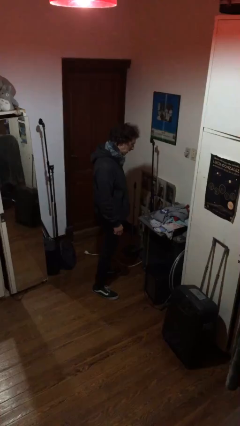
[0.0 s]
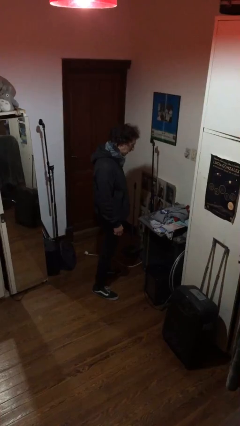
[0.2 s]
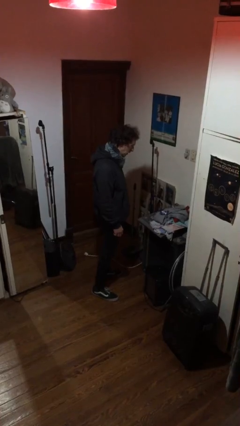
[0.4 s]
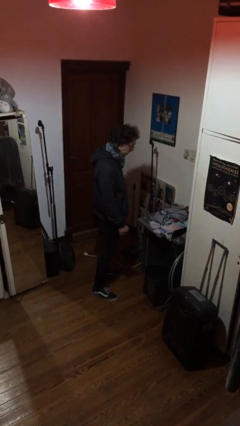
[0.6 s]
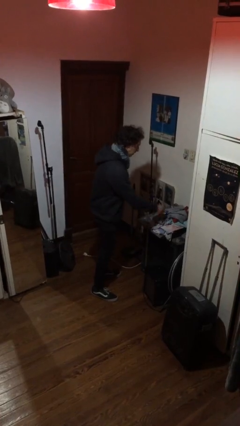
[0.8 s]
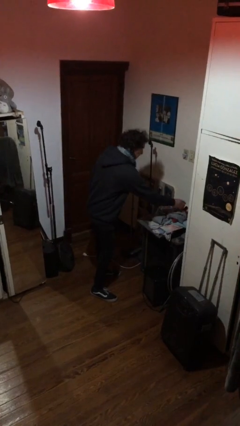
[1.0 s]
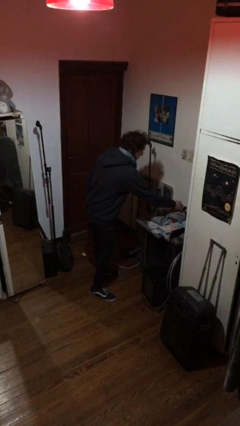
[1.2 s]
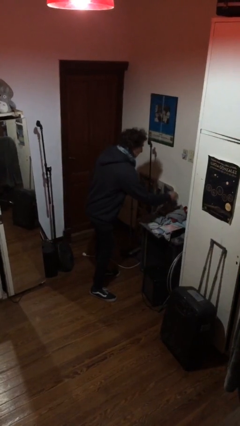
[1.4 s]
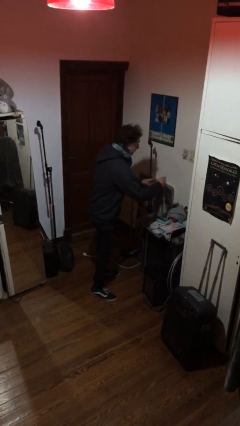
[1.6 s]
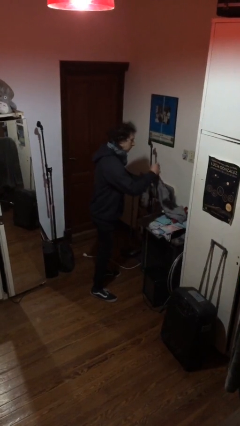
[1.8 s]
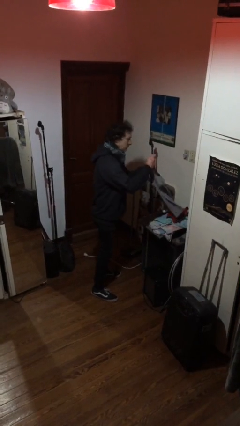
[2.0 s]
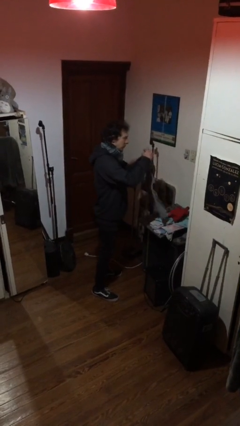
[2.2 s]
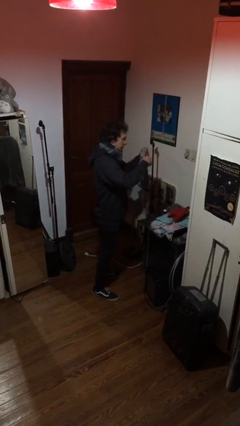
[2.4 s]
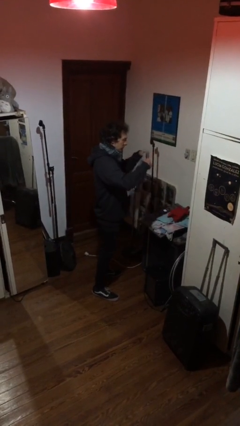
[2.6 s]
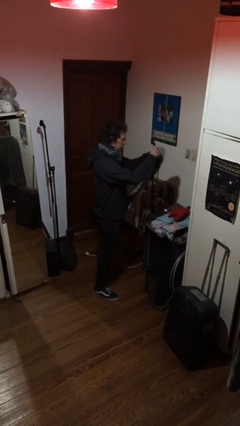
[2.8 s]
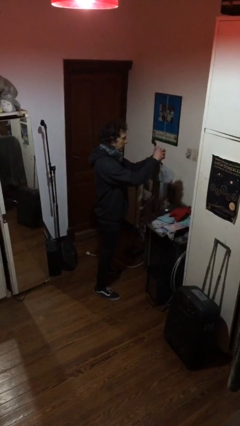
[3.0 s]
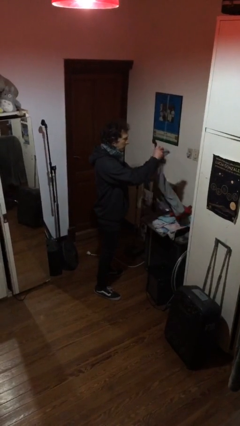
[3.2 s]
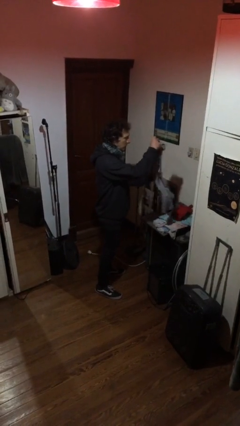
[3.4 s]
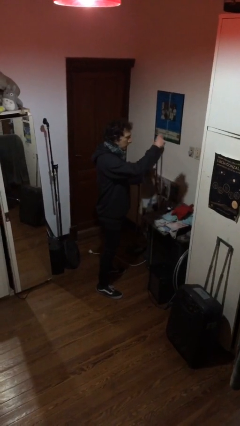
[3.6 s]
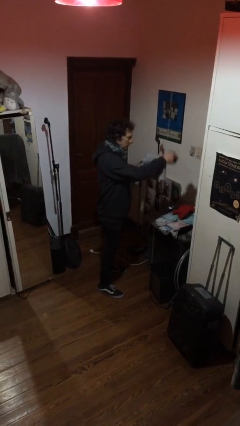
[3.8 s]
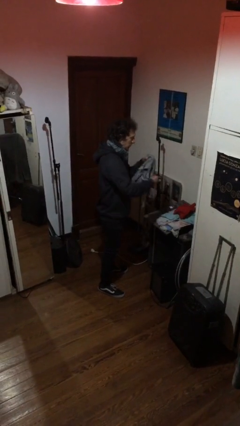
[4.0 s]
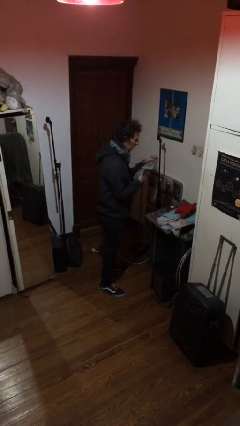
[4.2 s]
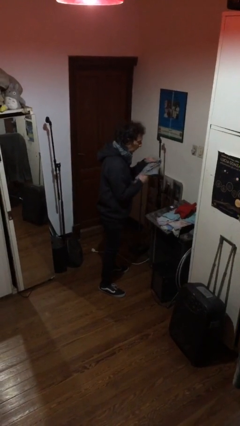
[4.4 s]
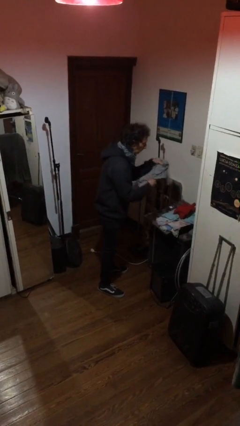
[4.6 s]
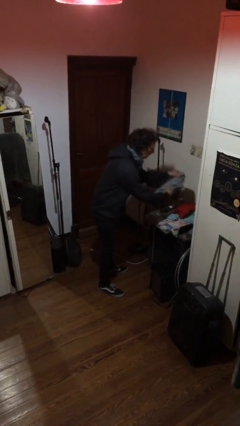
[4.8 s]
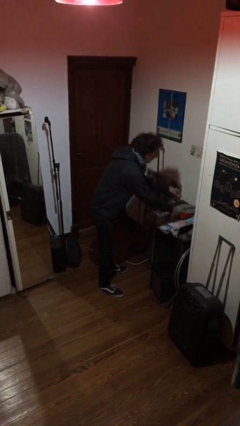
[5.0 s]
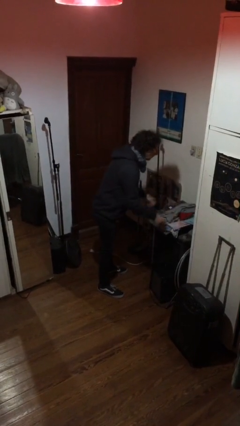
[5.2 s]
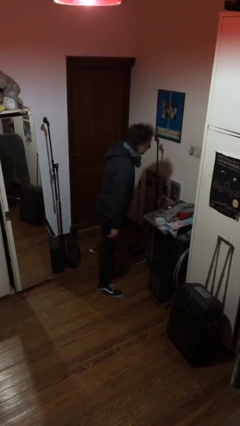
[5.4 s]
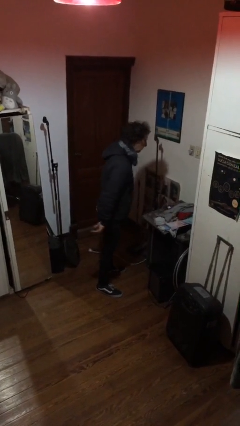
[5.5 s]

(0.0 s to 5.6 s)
person folds shirt

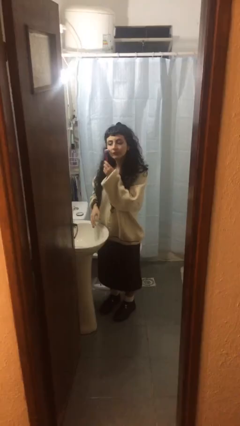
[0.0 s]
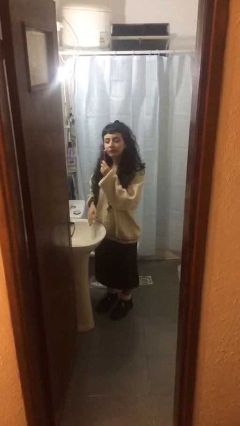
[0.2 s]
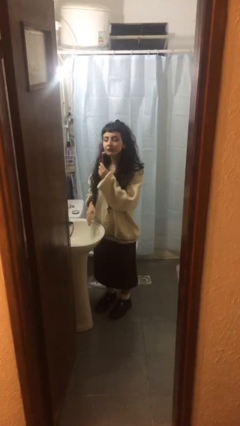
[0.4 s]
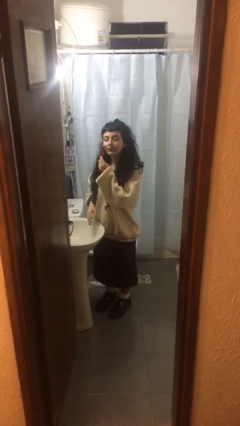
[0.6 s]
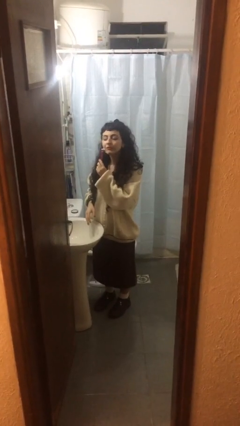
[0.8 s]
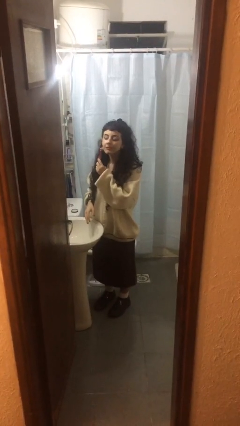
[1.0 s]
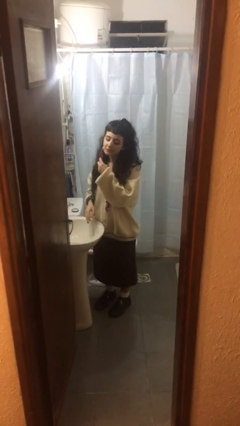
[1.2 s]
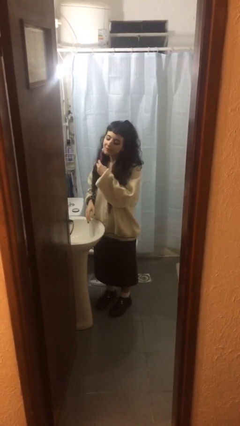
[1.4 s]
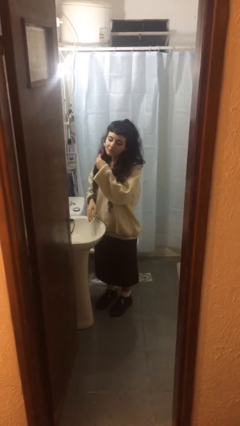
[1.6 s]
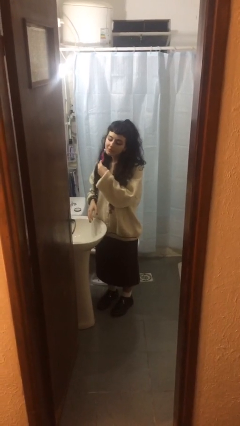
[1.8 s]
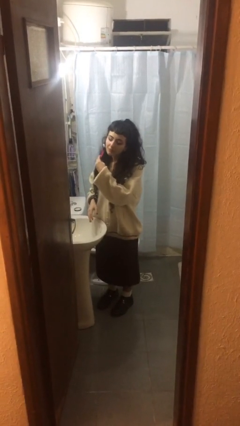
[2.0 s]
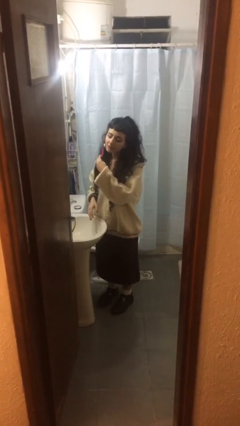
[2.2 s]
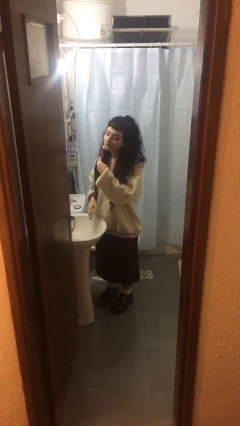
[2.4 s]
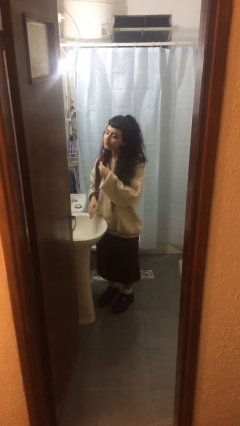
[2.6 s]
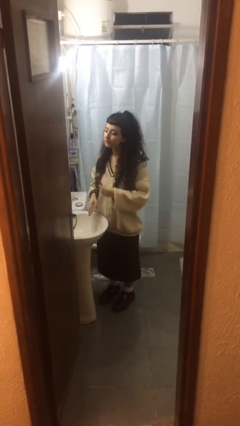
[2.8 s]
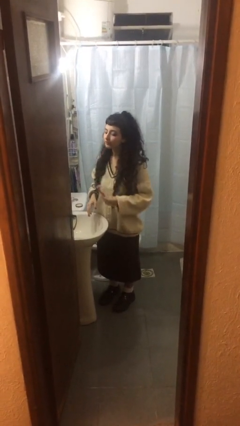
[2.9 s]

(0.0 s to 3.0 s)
person shaves face

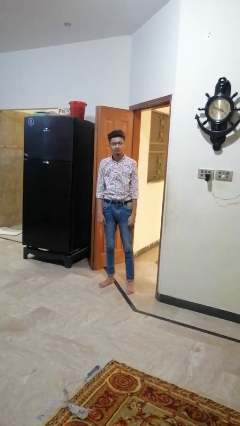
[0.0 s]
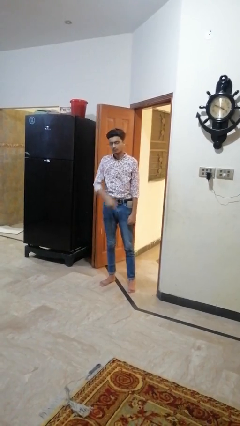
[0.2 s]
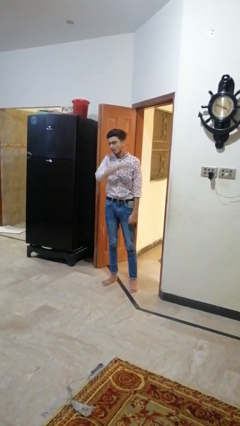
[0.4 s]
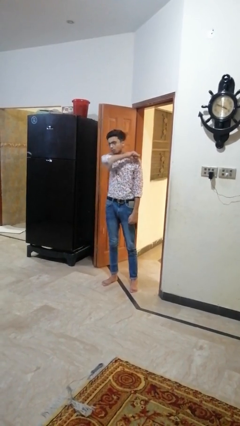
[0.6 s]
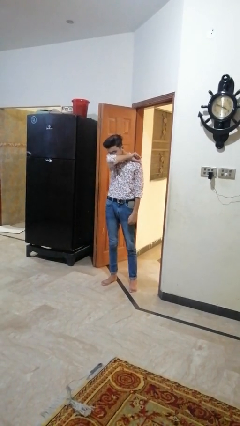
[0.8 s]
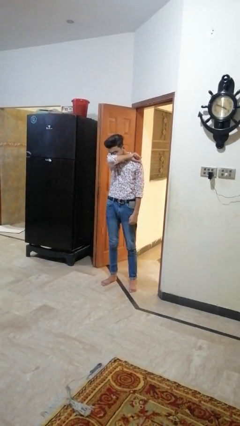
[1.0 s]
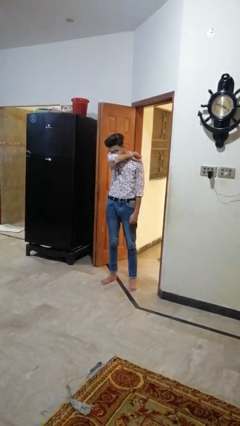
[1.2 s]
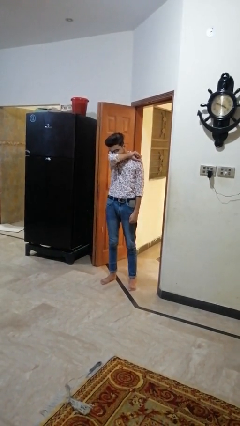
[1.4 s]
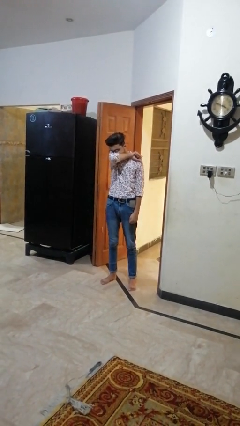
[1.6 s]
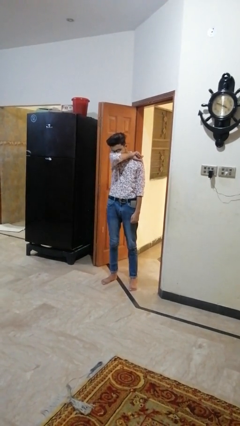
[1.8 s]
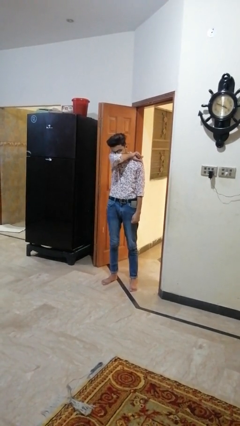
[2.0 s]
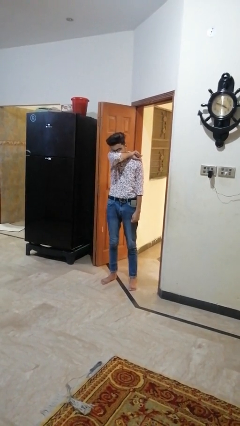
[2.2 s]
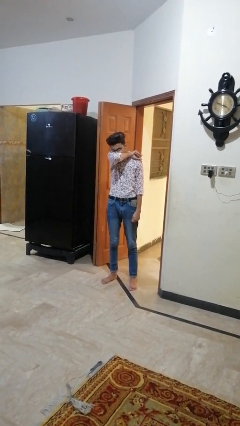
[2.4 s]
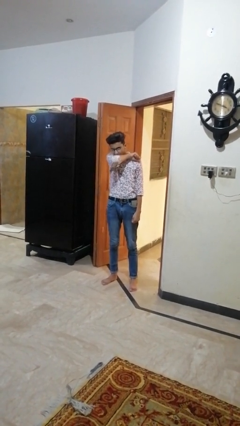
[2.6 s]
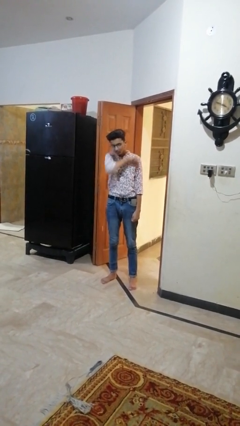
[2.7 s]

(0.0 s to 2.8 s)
person sneezes into arm

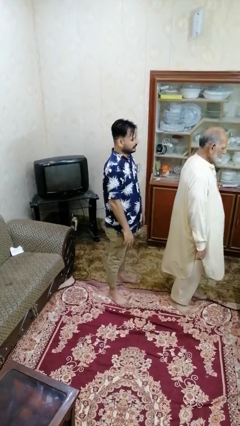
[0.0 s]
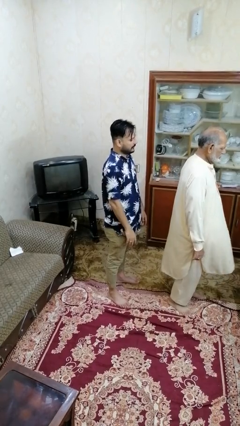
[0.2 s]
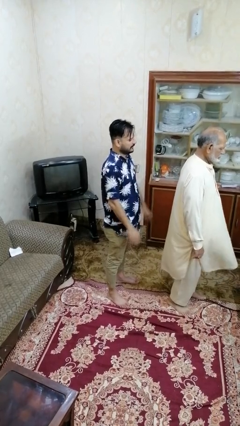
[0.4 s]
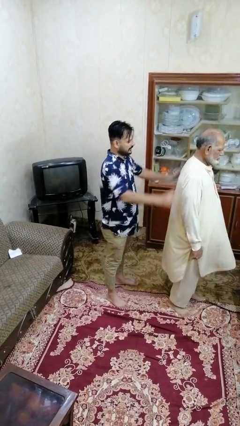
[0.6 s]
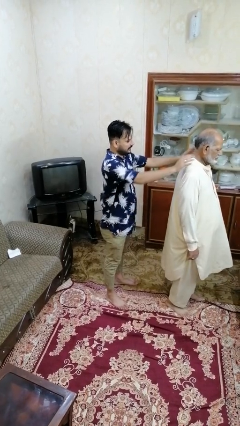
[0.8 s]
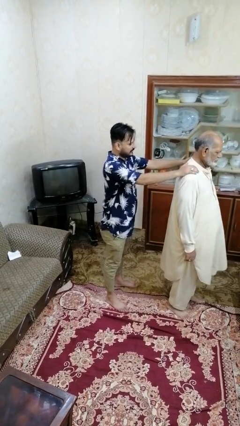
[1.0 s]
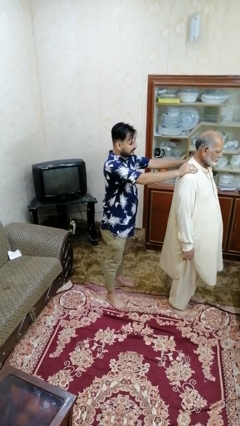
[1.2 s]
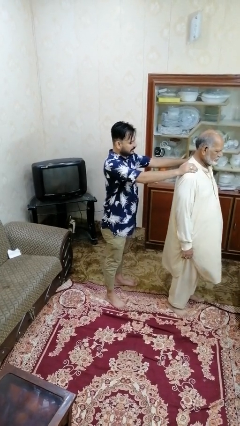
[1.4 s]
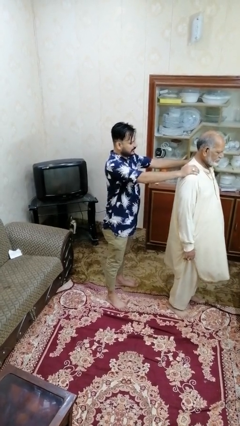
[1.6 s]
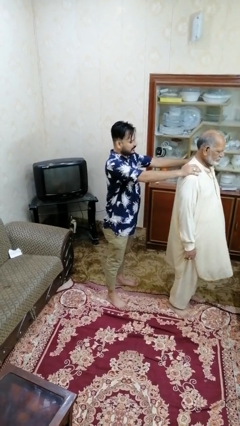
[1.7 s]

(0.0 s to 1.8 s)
person grabs person by shoulder

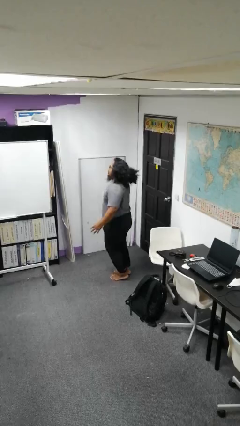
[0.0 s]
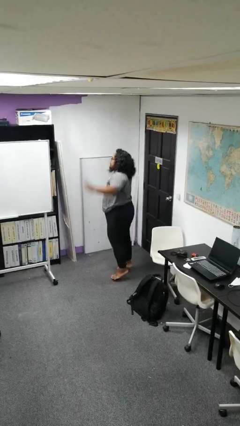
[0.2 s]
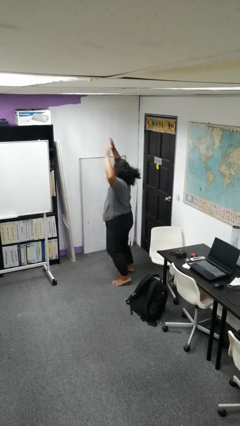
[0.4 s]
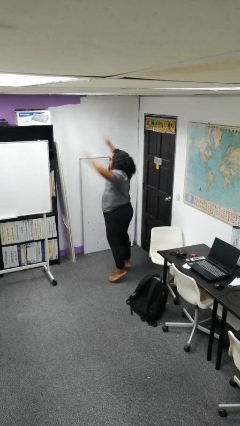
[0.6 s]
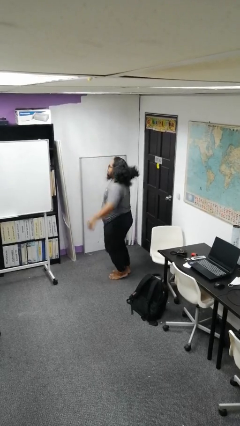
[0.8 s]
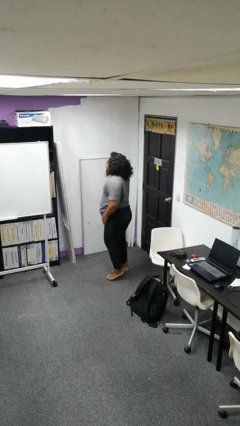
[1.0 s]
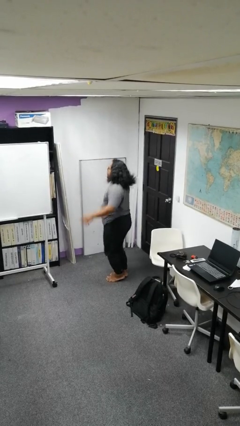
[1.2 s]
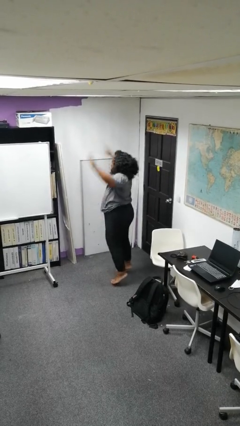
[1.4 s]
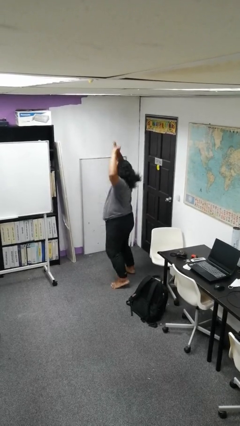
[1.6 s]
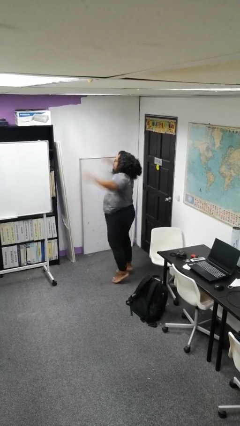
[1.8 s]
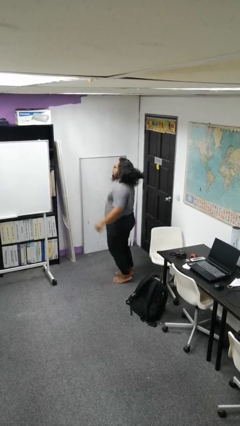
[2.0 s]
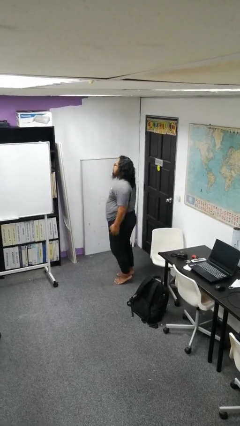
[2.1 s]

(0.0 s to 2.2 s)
person exercises with jumping jacks

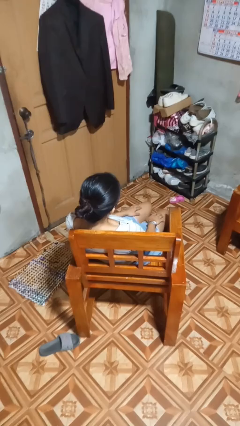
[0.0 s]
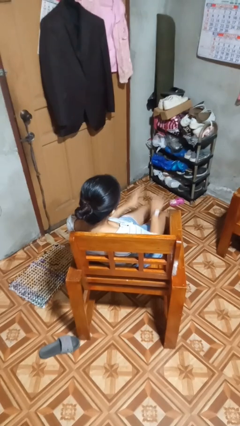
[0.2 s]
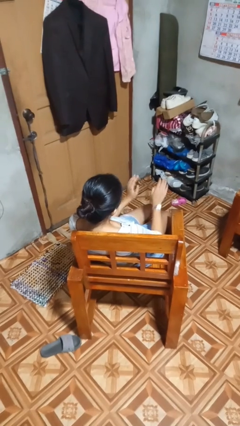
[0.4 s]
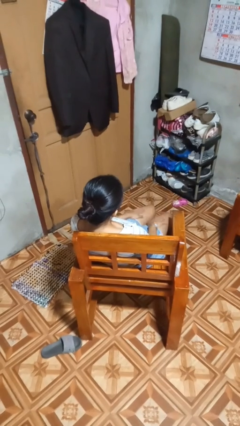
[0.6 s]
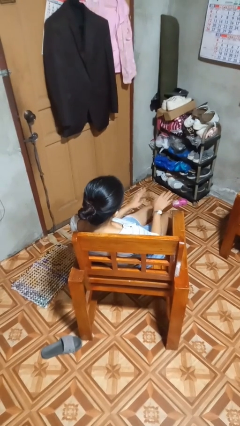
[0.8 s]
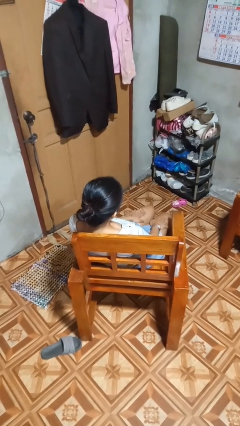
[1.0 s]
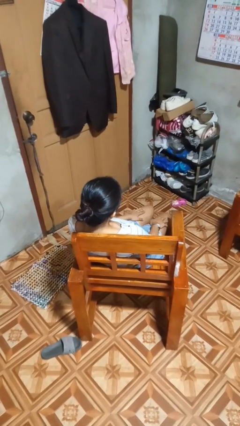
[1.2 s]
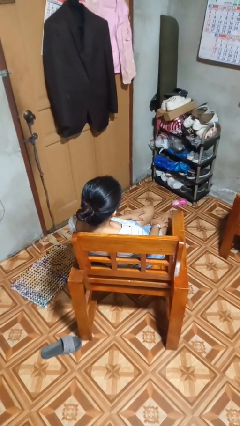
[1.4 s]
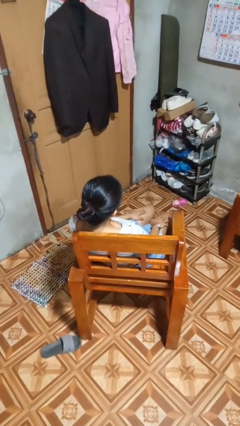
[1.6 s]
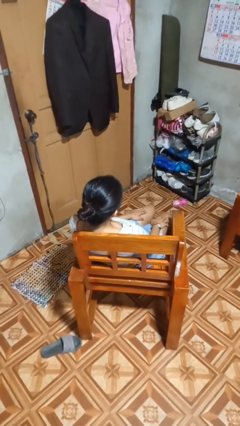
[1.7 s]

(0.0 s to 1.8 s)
person slaps hands on thighs

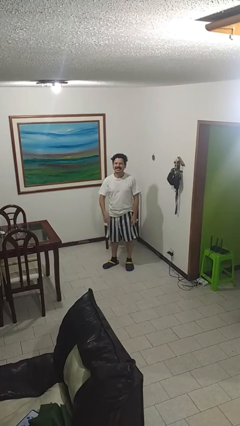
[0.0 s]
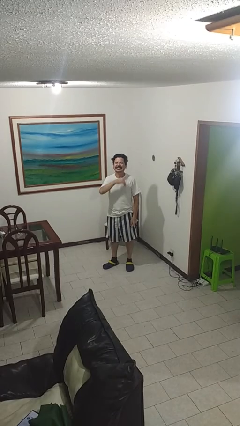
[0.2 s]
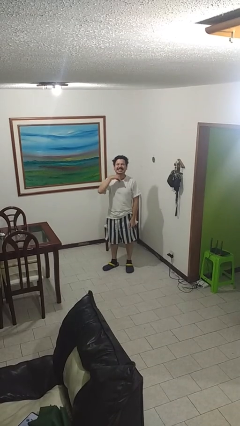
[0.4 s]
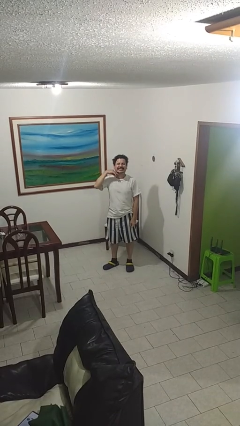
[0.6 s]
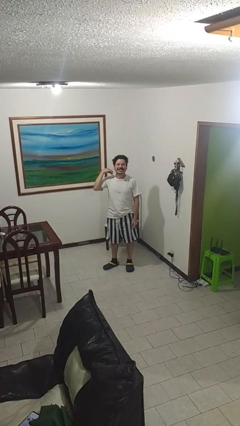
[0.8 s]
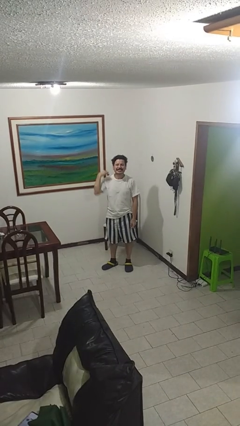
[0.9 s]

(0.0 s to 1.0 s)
person gestures cut
